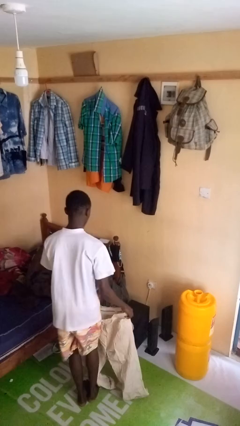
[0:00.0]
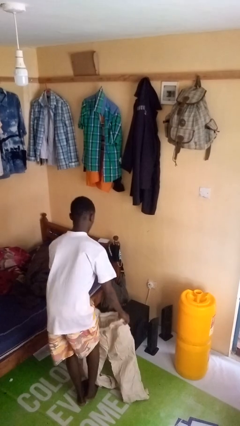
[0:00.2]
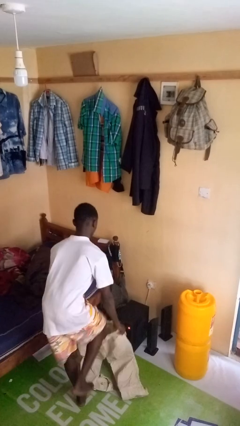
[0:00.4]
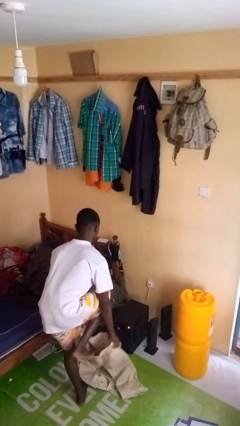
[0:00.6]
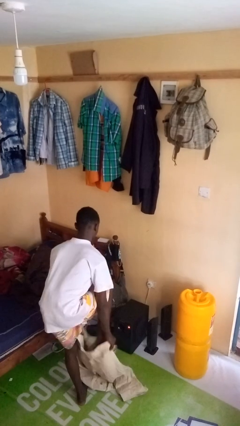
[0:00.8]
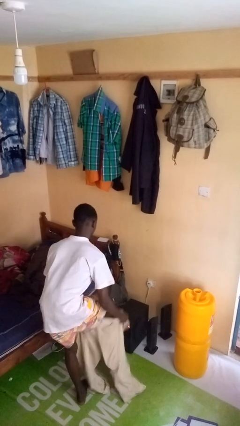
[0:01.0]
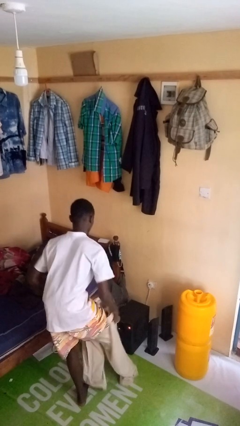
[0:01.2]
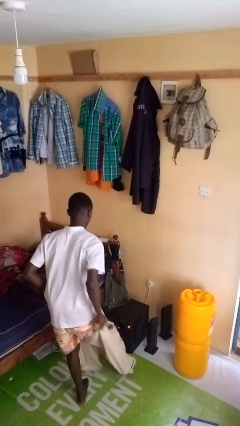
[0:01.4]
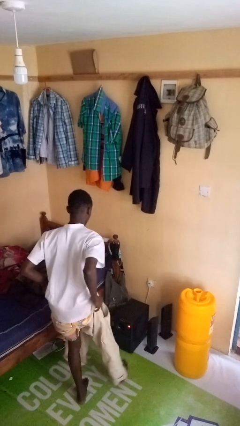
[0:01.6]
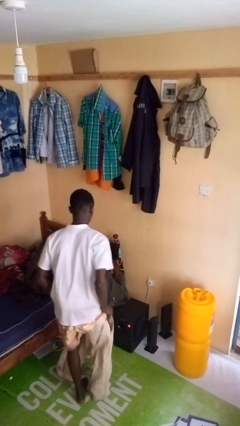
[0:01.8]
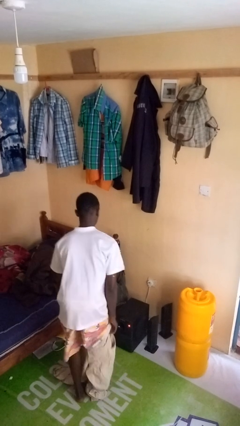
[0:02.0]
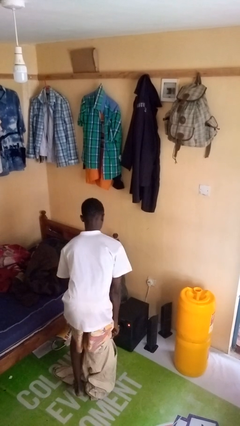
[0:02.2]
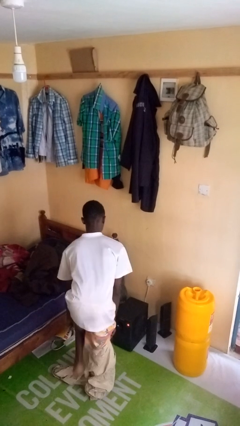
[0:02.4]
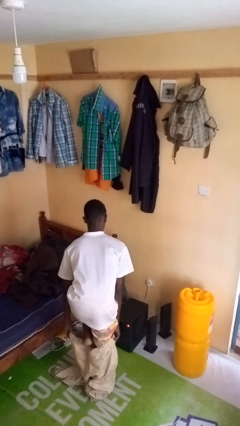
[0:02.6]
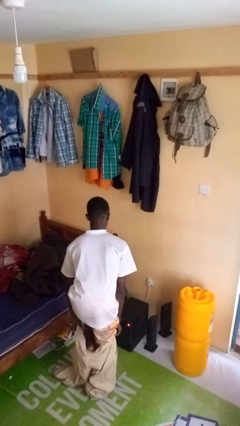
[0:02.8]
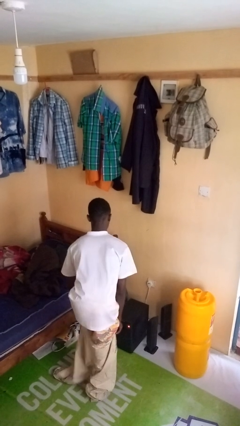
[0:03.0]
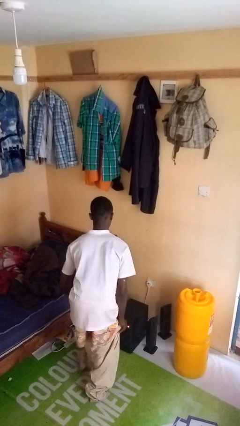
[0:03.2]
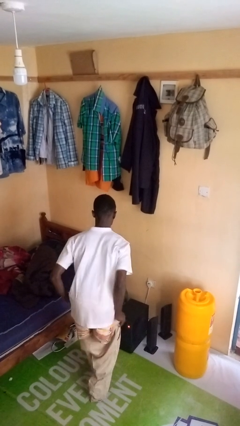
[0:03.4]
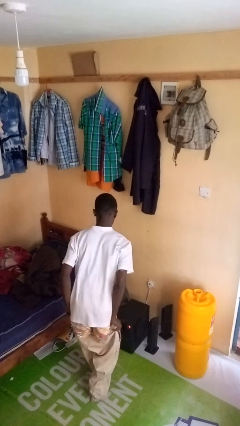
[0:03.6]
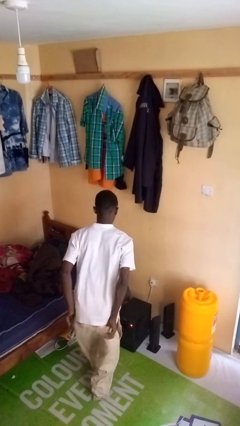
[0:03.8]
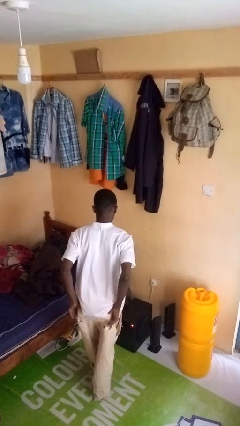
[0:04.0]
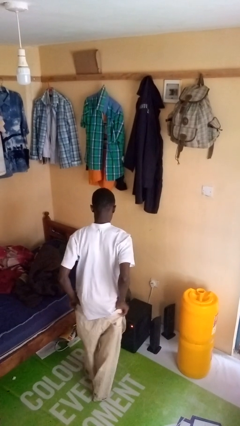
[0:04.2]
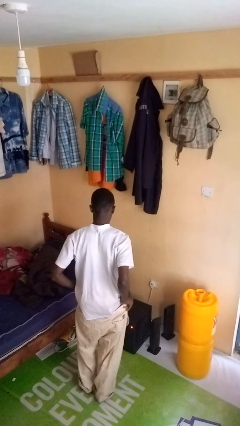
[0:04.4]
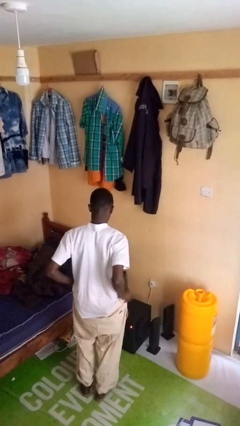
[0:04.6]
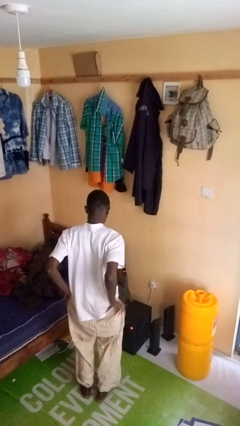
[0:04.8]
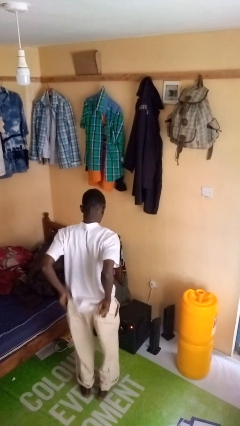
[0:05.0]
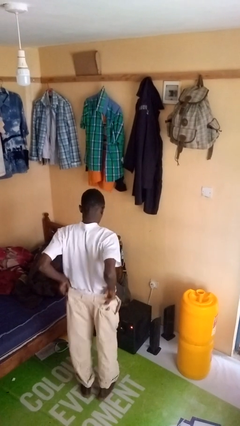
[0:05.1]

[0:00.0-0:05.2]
person puts on pants

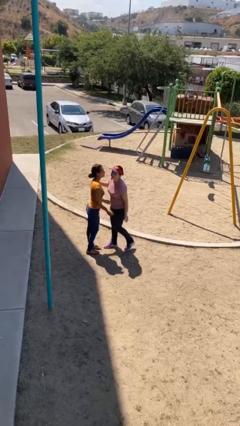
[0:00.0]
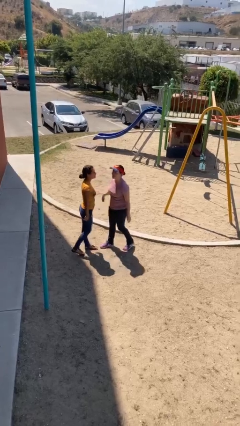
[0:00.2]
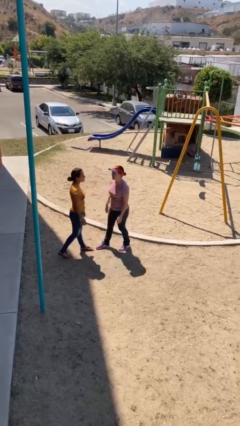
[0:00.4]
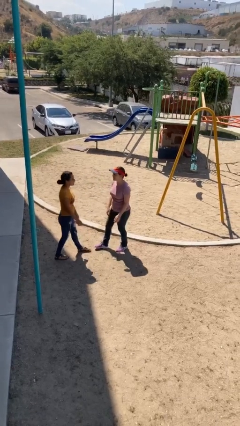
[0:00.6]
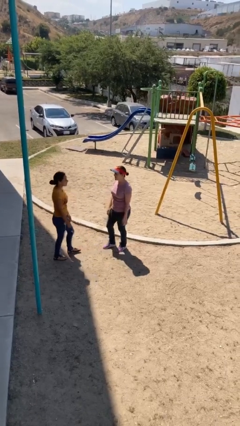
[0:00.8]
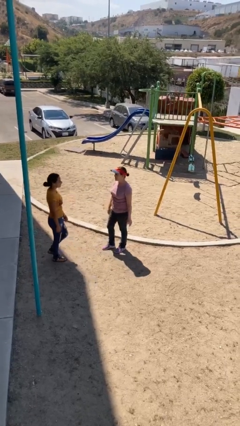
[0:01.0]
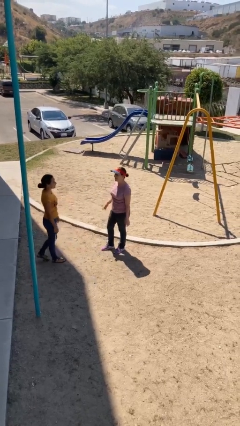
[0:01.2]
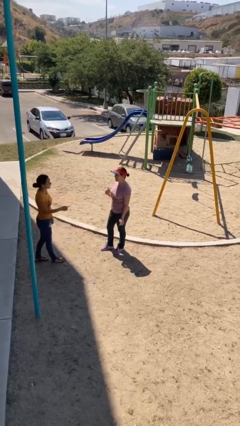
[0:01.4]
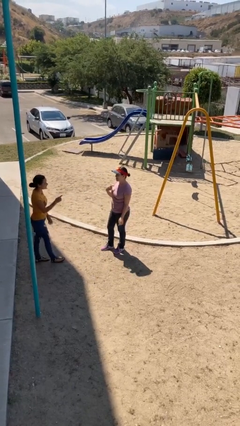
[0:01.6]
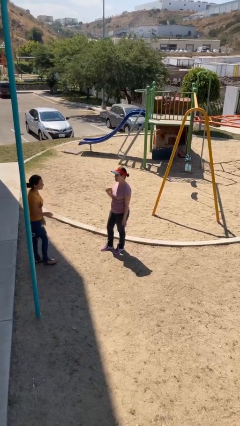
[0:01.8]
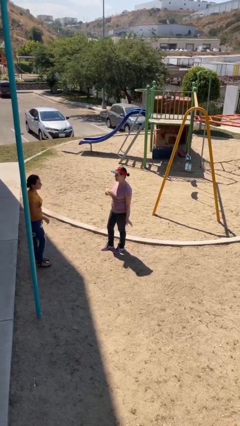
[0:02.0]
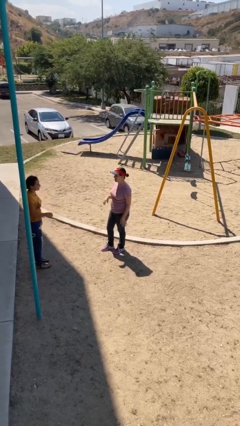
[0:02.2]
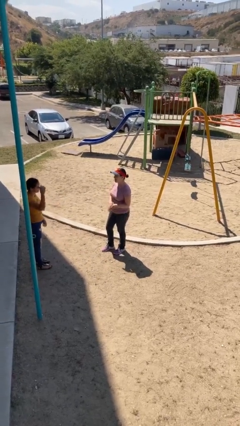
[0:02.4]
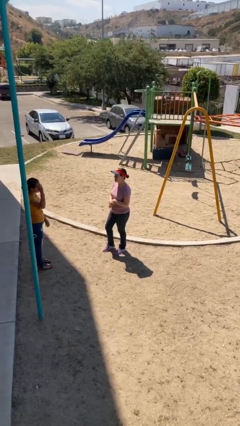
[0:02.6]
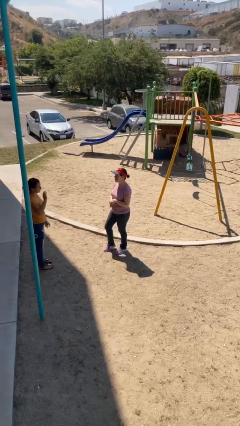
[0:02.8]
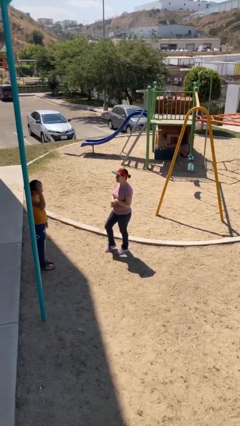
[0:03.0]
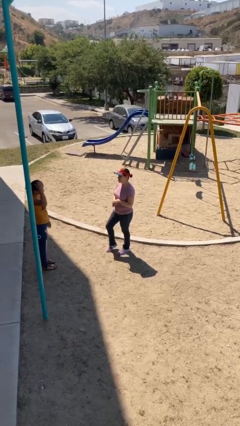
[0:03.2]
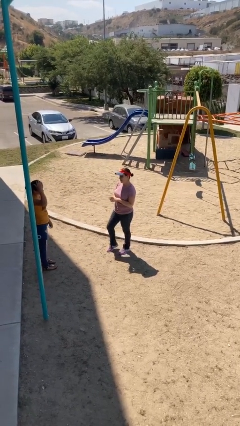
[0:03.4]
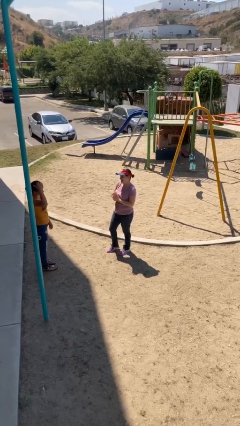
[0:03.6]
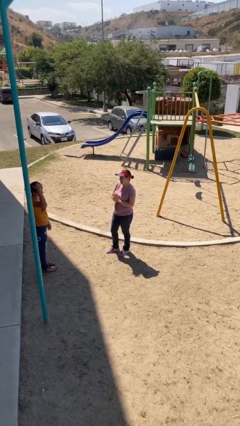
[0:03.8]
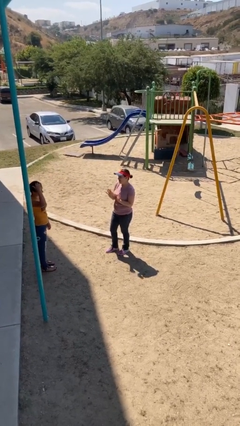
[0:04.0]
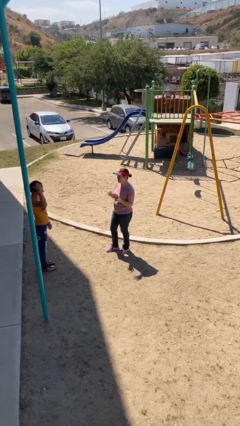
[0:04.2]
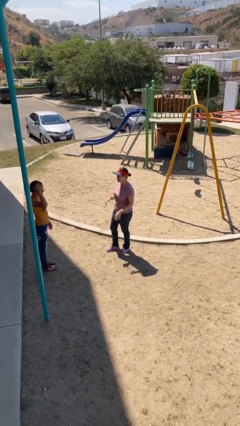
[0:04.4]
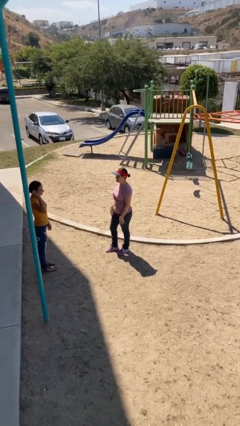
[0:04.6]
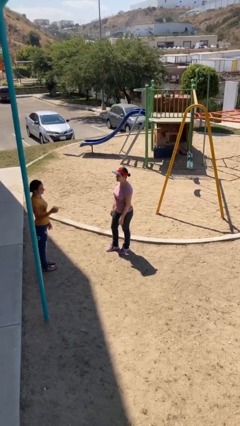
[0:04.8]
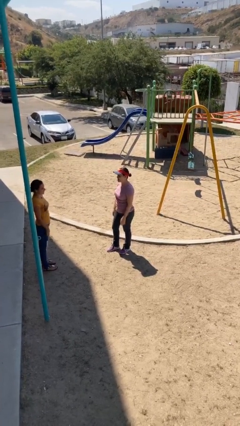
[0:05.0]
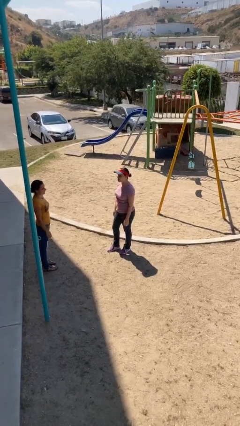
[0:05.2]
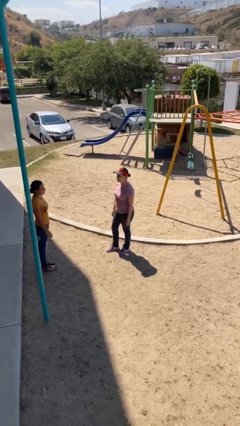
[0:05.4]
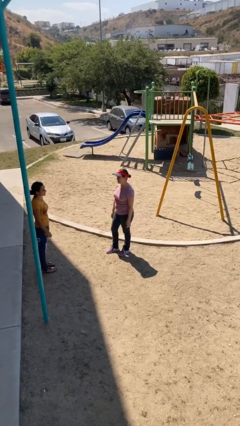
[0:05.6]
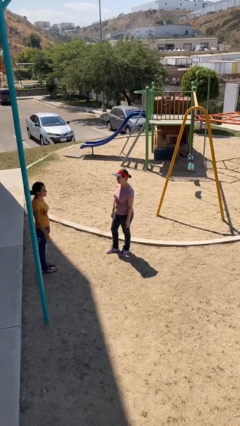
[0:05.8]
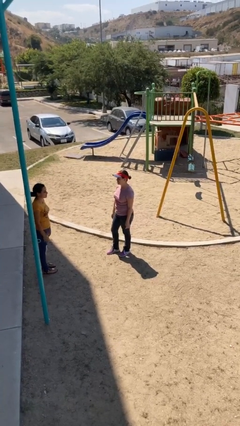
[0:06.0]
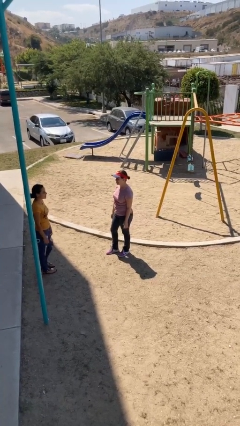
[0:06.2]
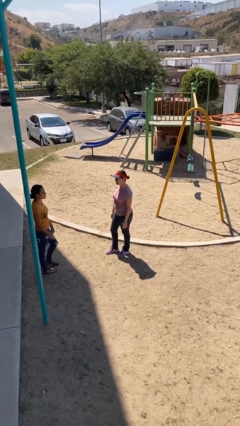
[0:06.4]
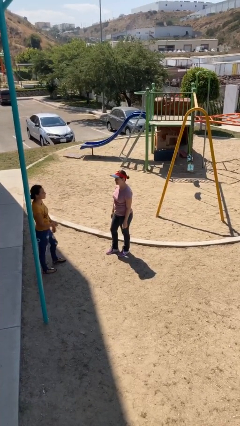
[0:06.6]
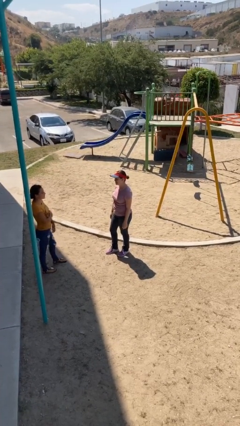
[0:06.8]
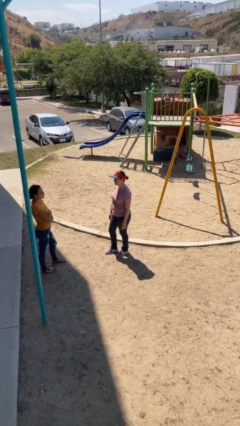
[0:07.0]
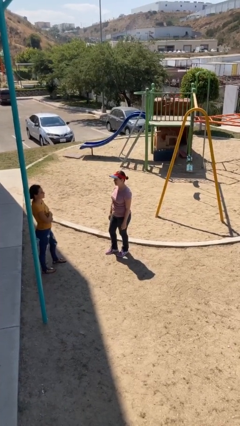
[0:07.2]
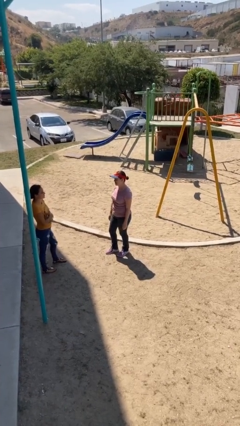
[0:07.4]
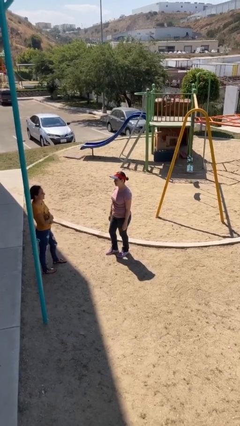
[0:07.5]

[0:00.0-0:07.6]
person talks to person

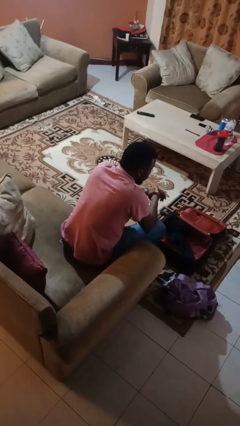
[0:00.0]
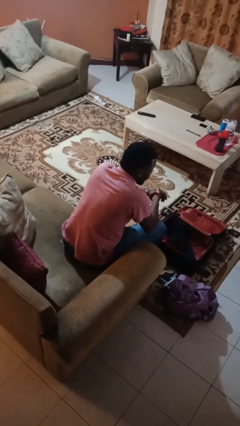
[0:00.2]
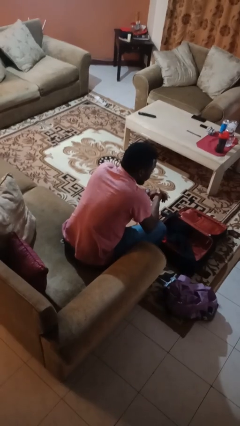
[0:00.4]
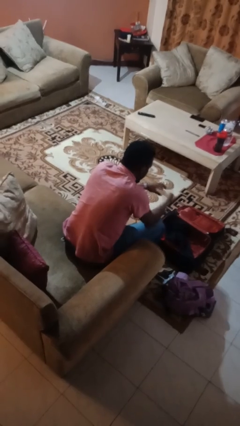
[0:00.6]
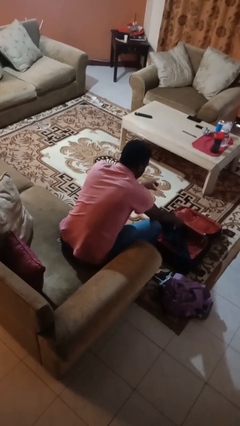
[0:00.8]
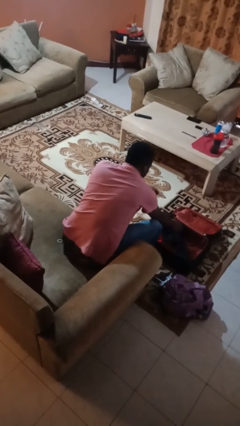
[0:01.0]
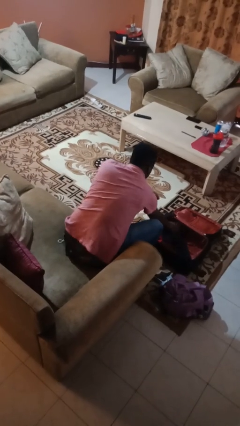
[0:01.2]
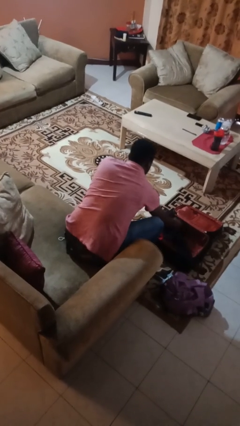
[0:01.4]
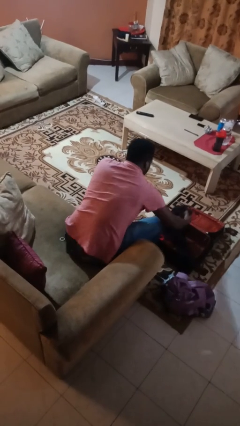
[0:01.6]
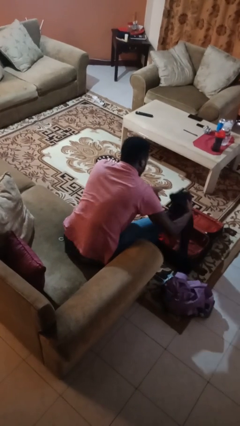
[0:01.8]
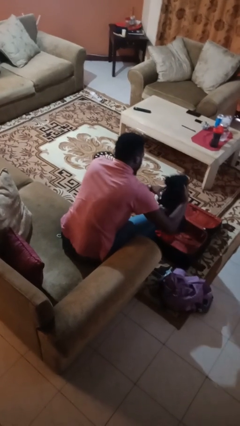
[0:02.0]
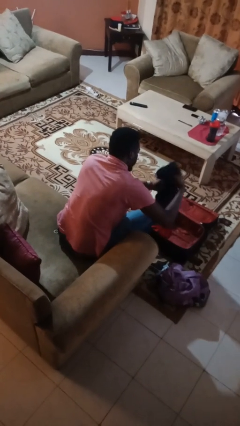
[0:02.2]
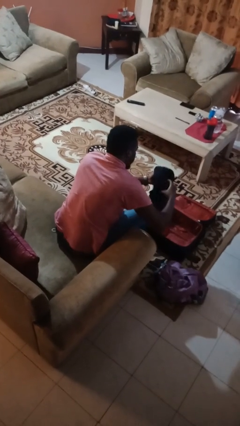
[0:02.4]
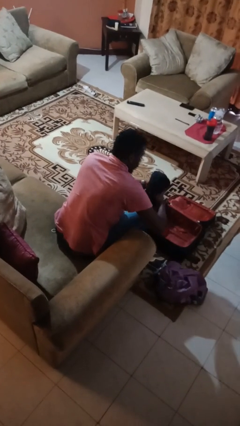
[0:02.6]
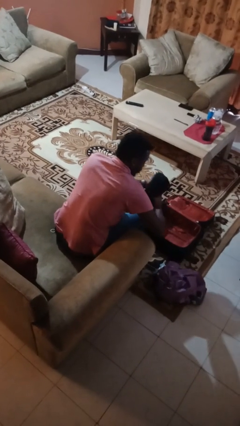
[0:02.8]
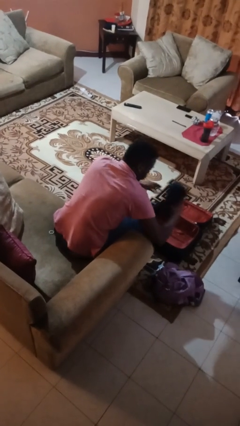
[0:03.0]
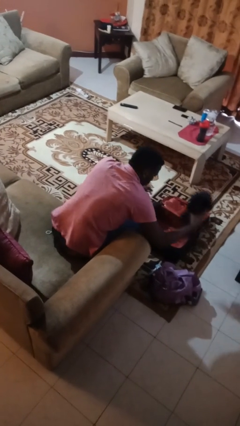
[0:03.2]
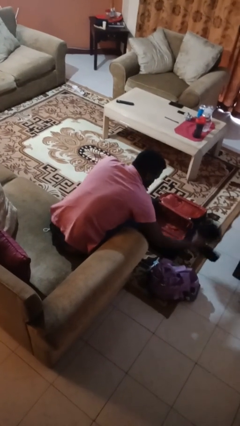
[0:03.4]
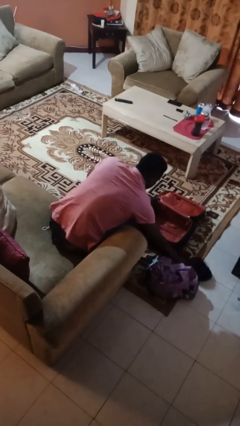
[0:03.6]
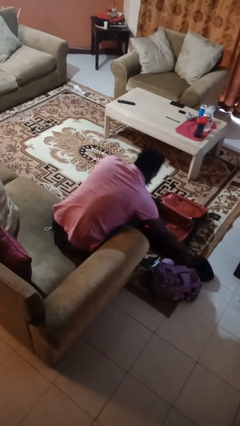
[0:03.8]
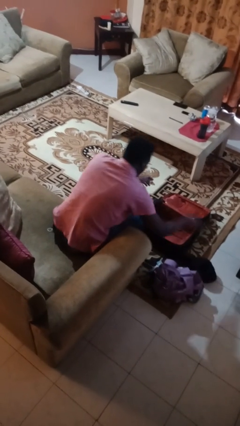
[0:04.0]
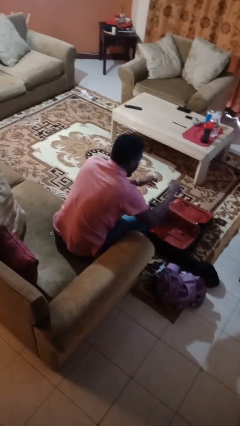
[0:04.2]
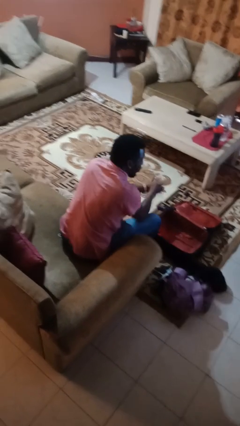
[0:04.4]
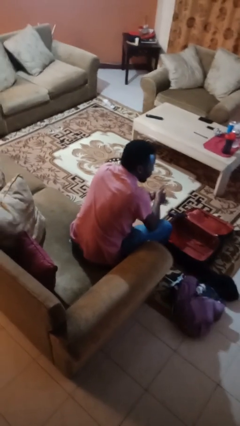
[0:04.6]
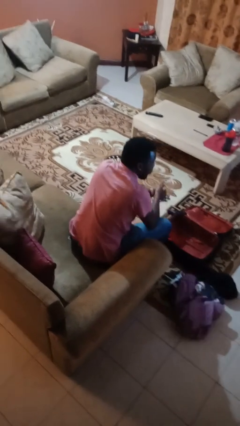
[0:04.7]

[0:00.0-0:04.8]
person unloads clothes from suitcase

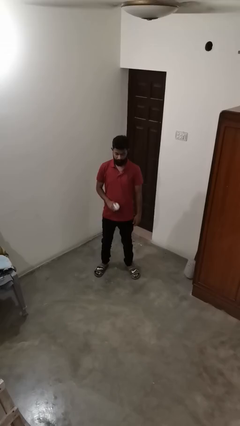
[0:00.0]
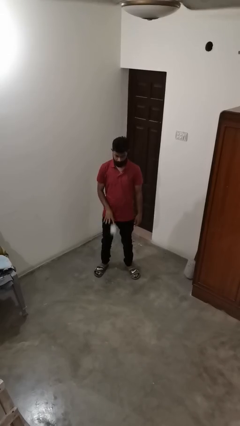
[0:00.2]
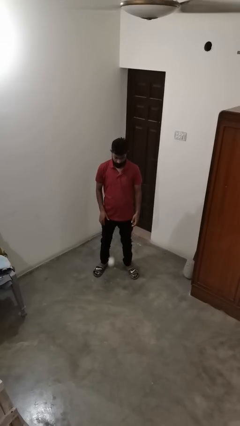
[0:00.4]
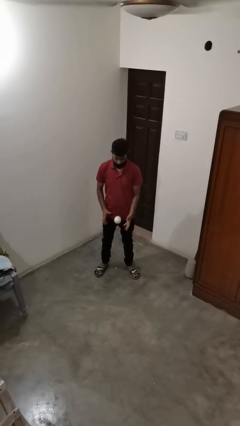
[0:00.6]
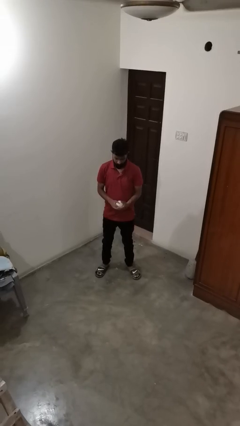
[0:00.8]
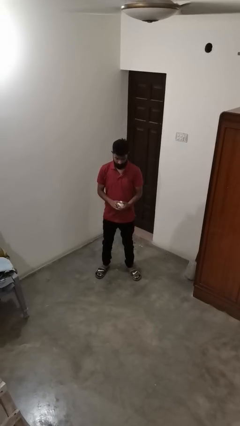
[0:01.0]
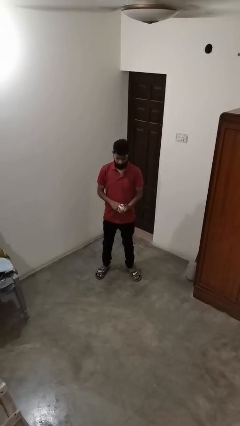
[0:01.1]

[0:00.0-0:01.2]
person bounces ball on floor
